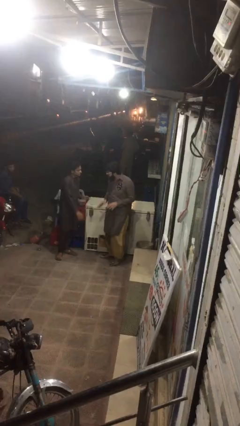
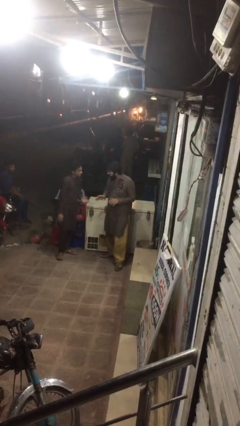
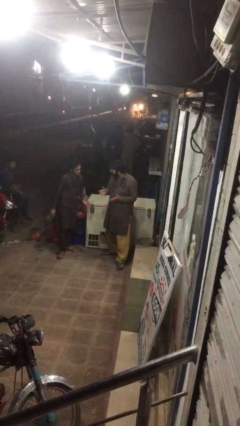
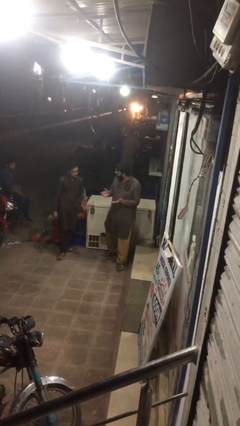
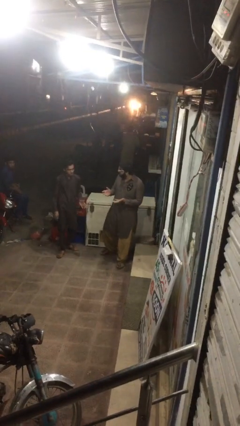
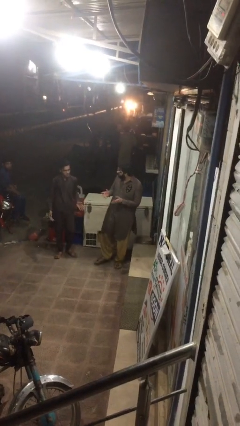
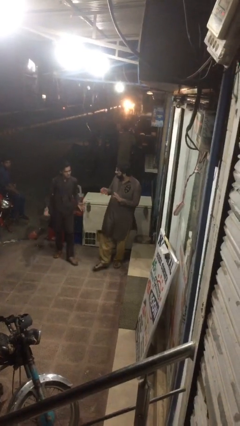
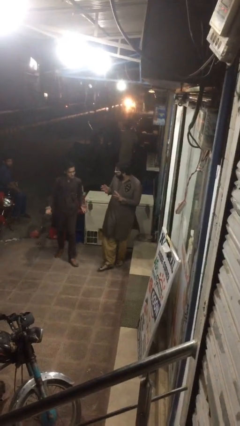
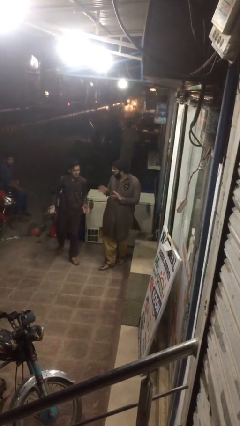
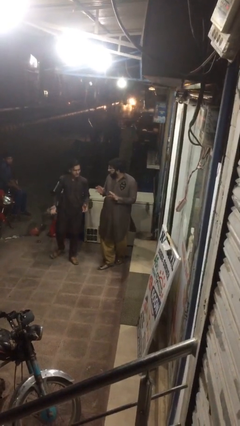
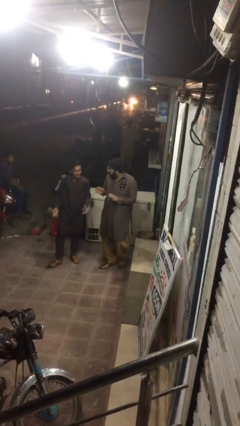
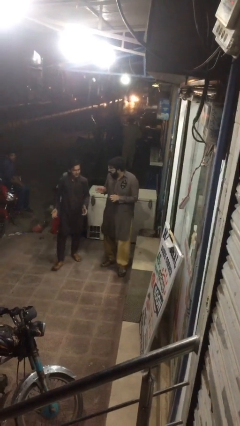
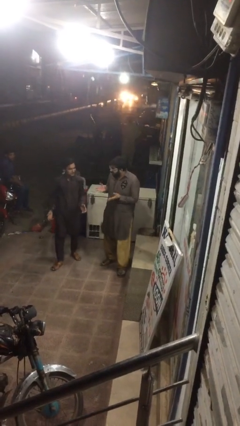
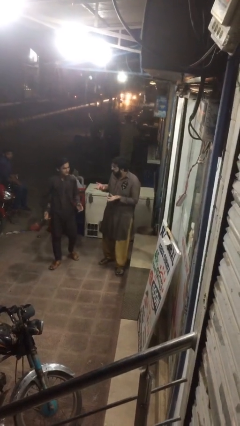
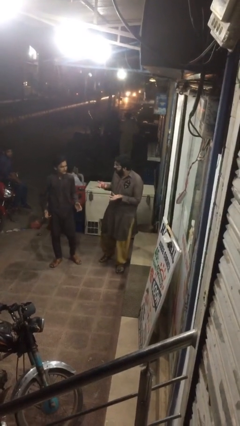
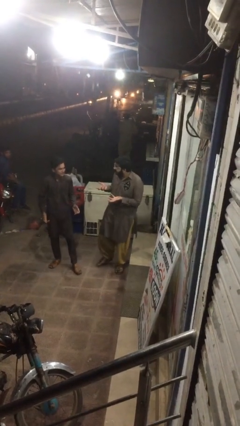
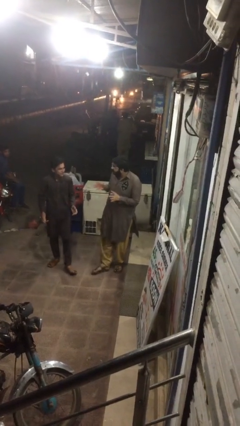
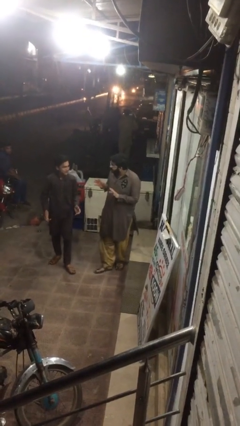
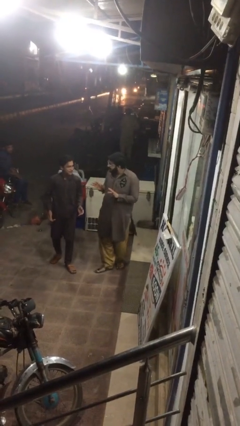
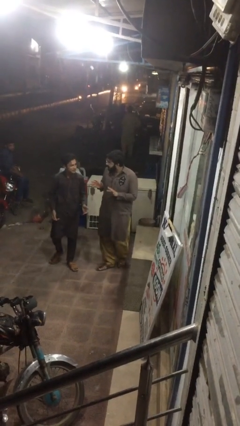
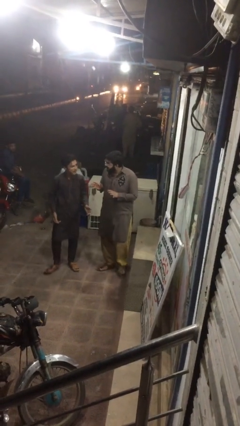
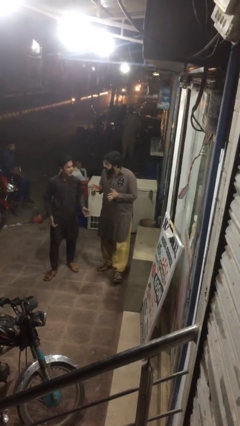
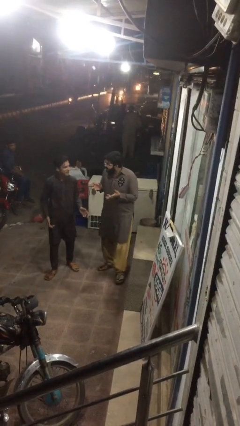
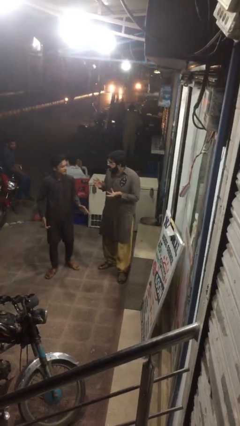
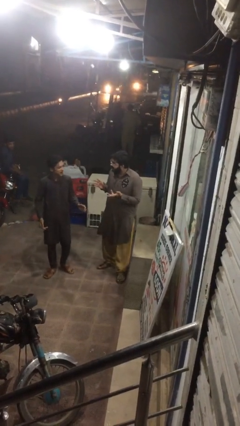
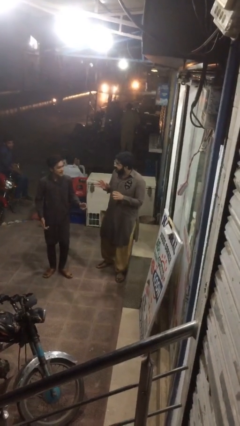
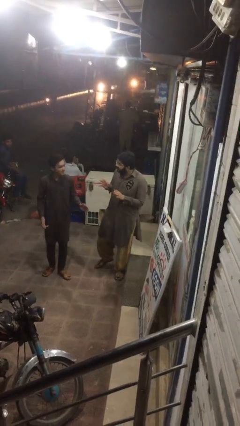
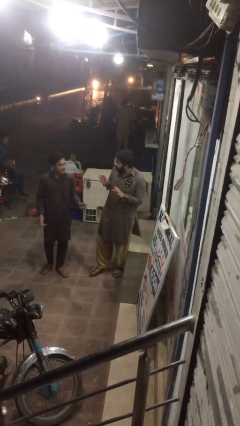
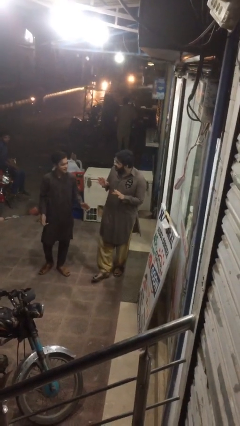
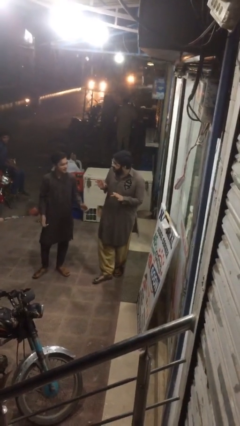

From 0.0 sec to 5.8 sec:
person talks to person

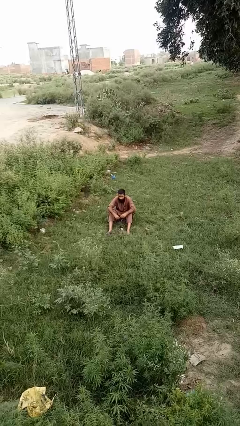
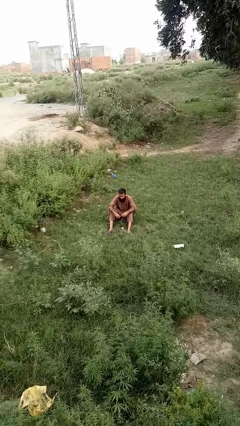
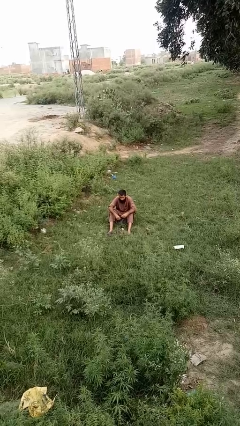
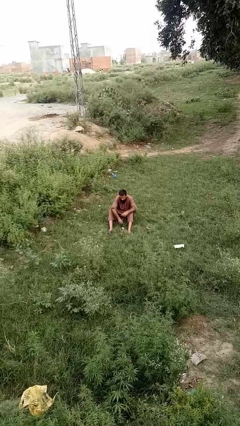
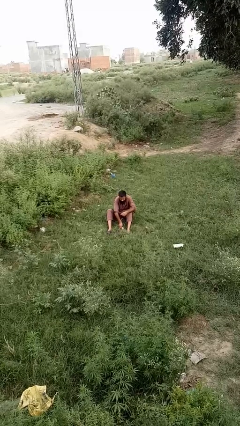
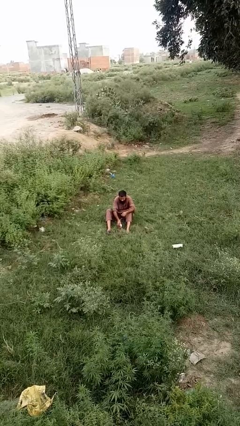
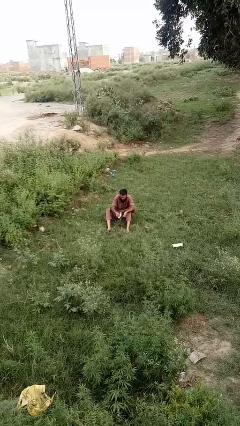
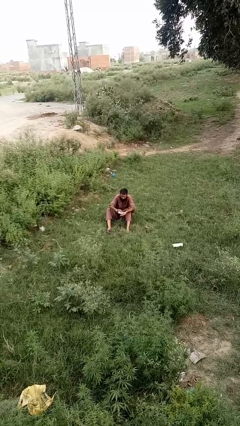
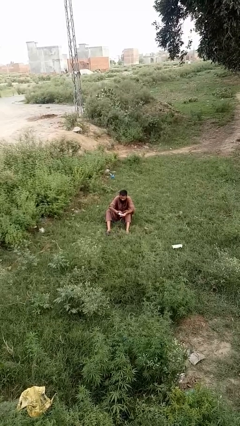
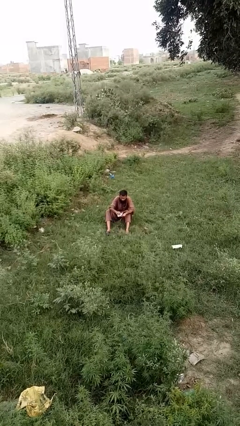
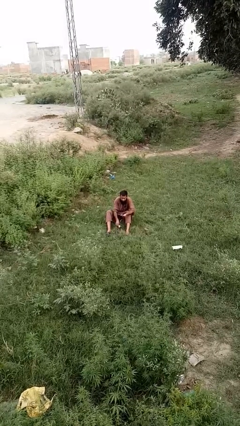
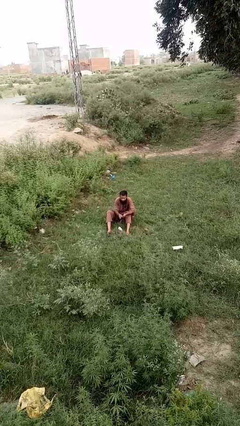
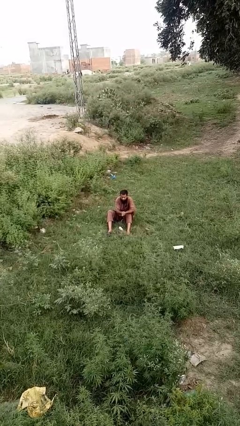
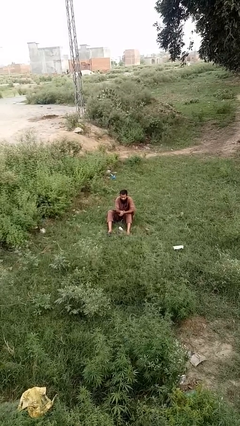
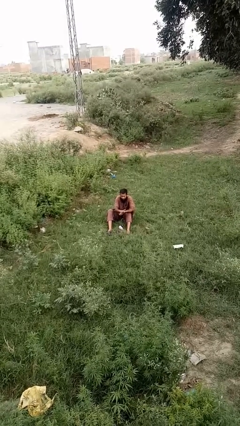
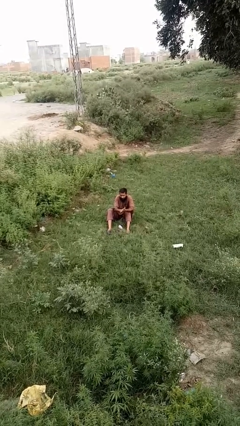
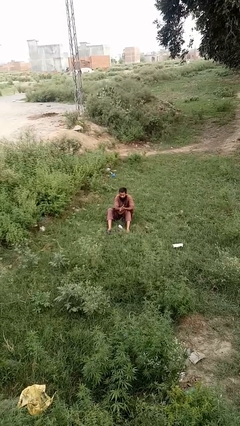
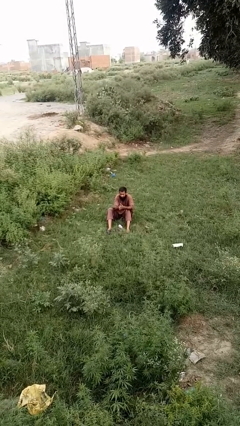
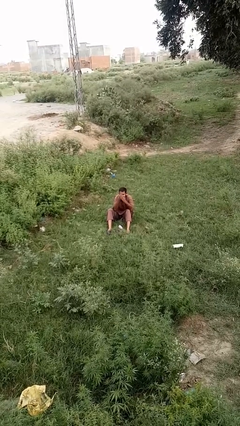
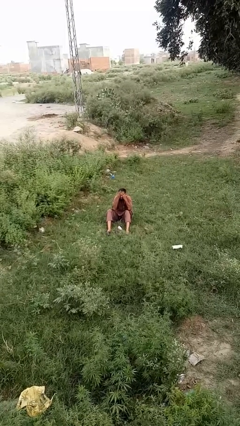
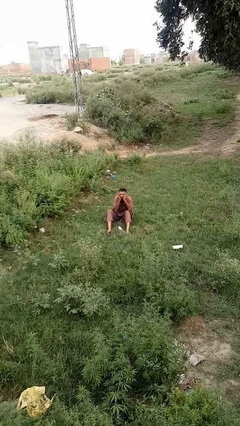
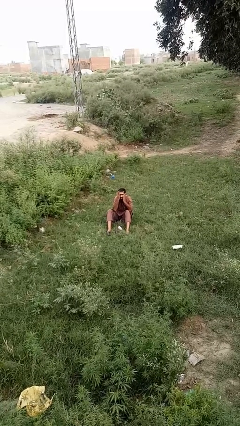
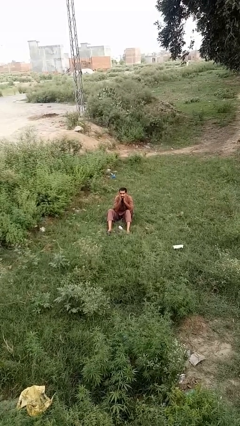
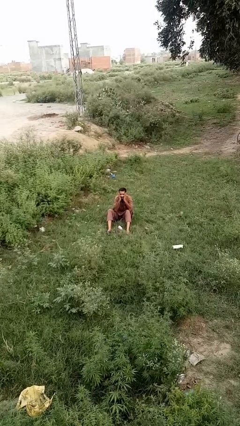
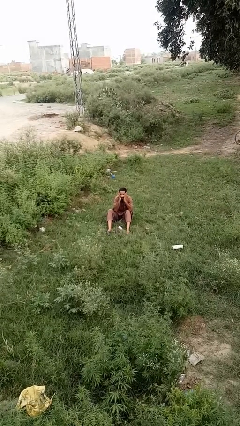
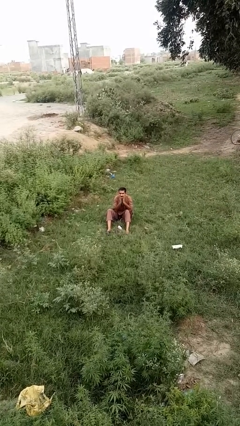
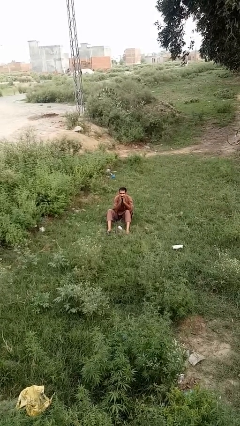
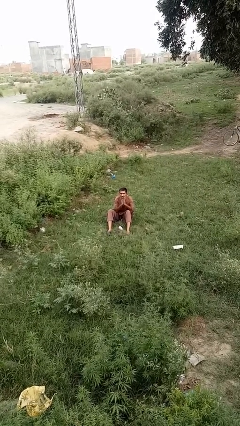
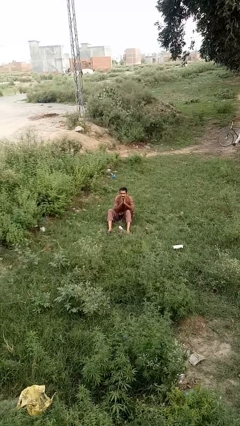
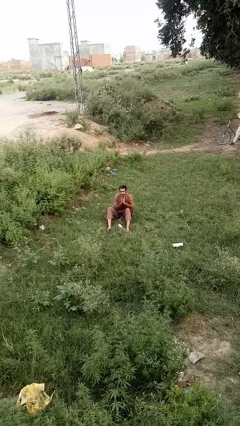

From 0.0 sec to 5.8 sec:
person applies sunscreen

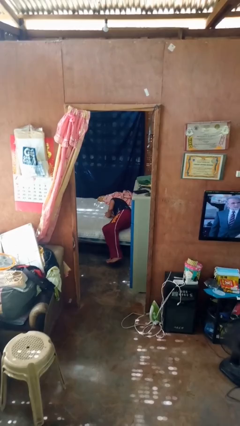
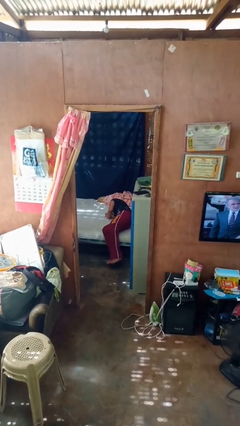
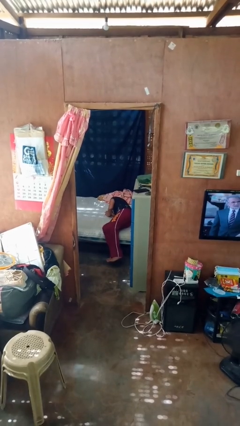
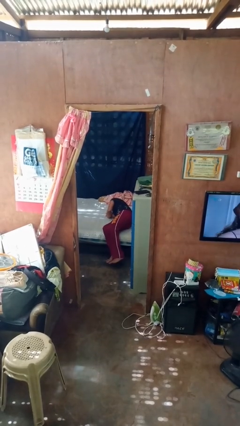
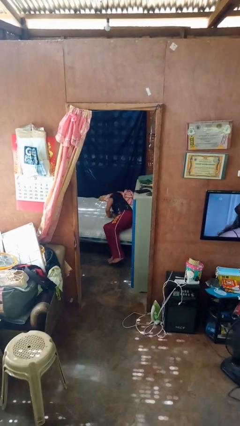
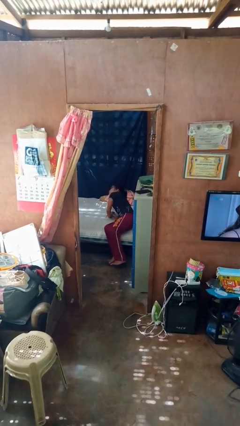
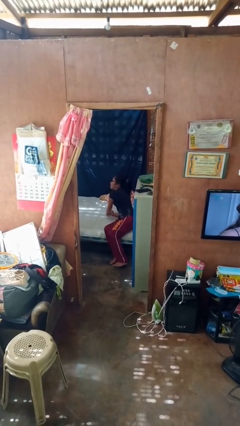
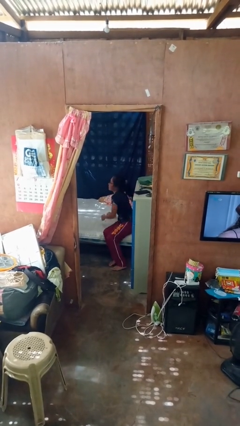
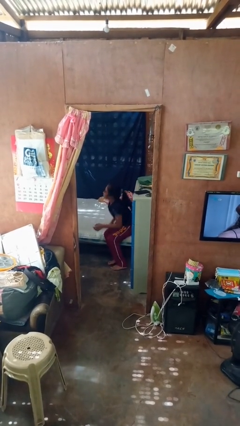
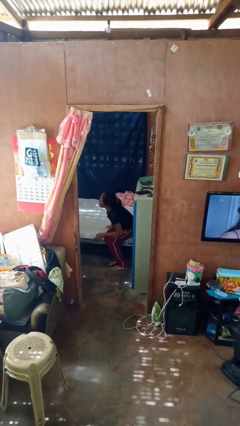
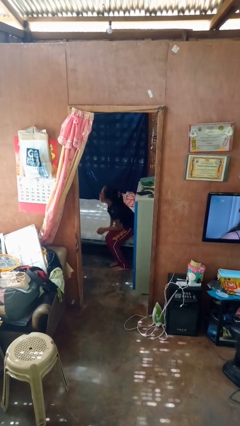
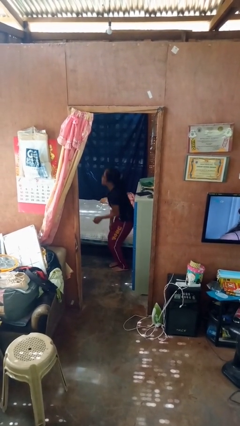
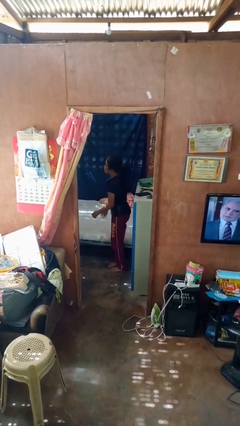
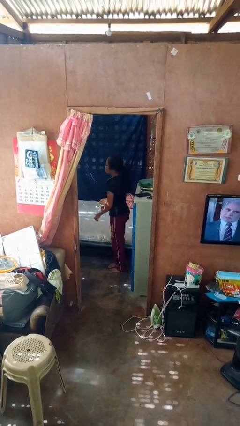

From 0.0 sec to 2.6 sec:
person stands up

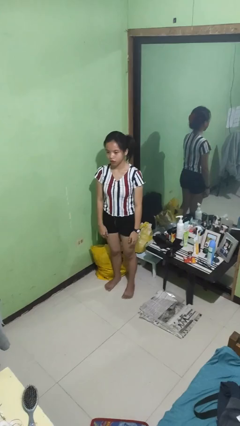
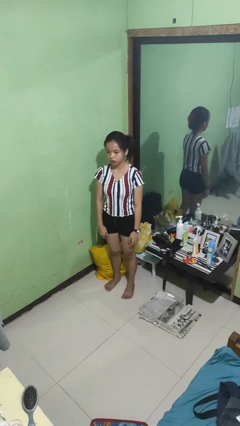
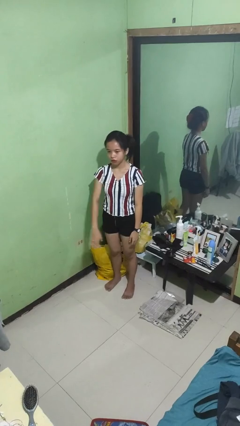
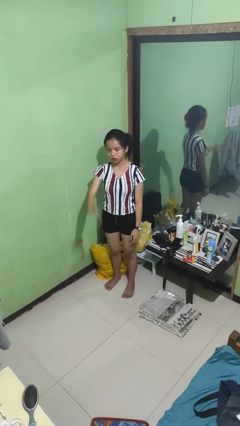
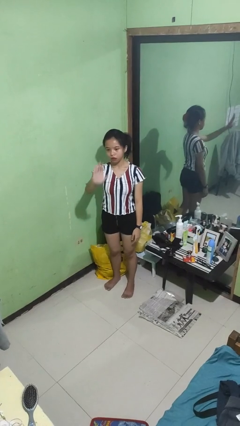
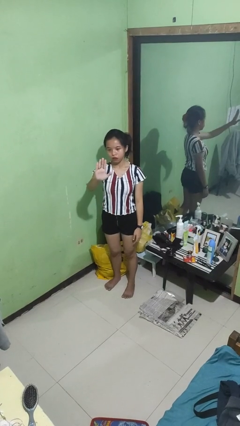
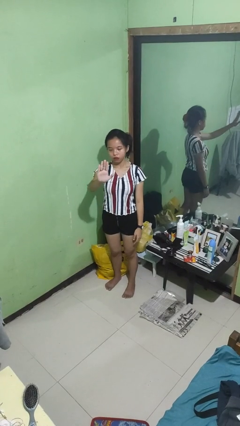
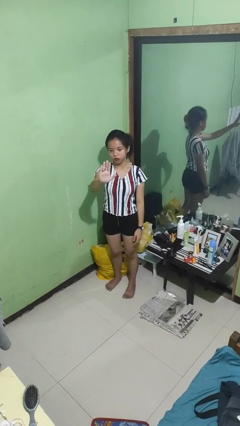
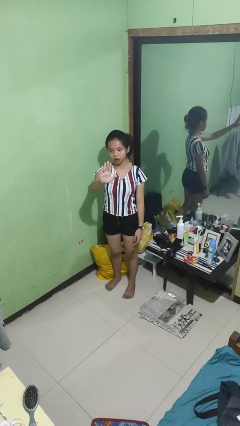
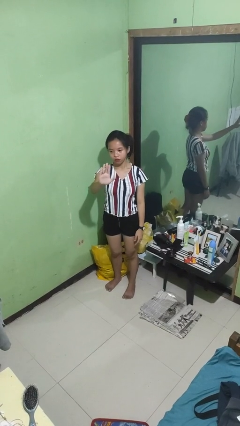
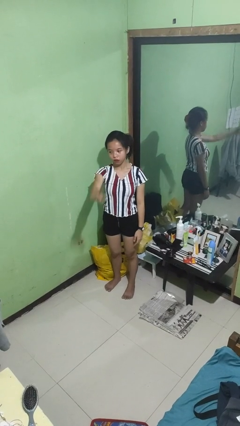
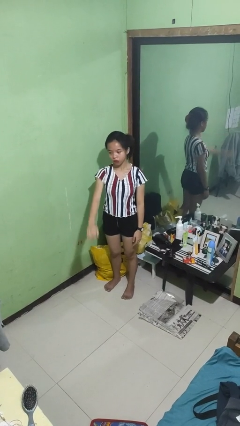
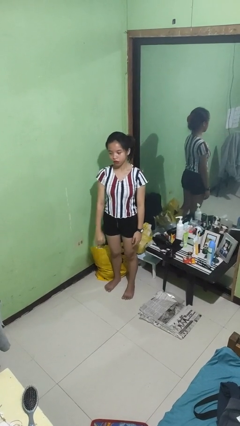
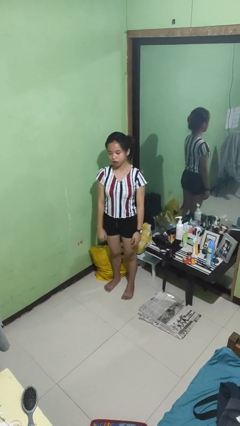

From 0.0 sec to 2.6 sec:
person gestures stop

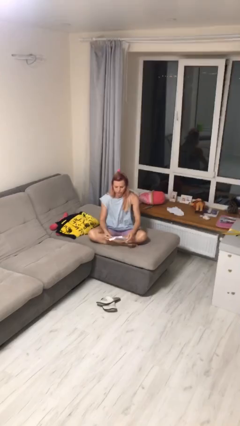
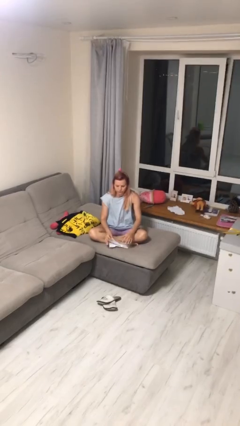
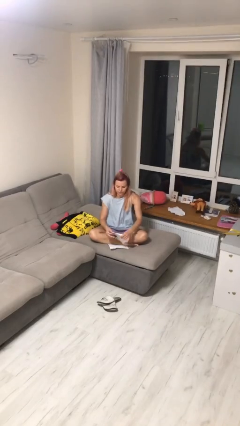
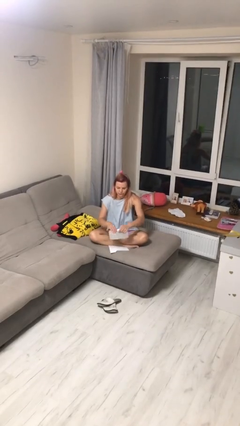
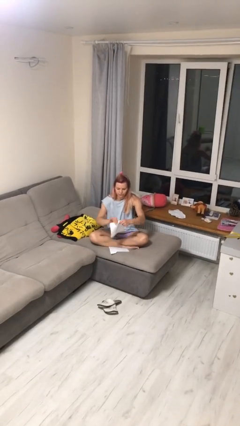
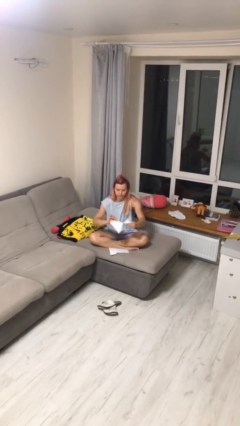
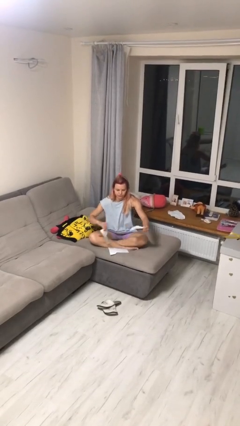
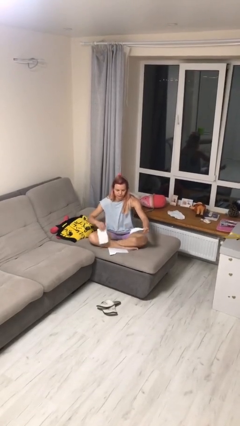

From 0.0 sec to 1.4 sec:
person tears paper
